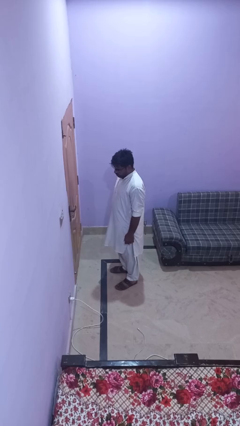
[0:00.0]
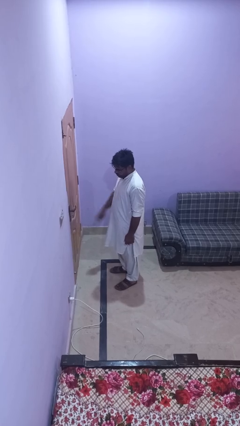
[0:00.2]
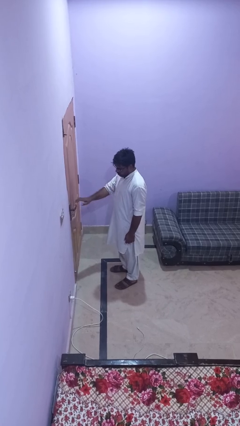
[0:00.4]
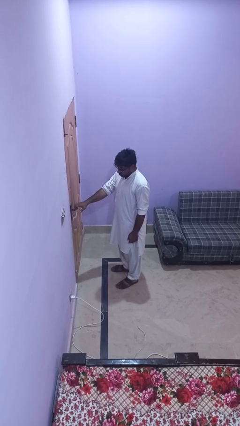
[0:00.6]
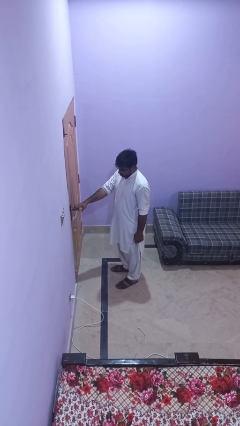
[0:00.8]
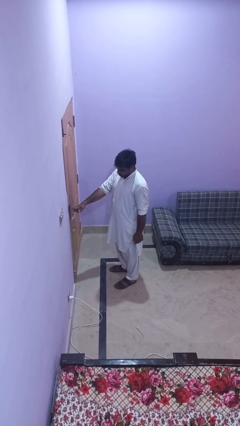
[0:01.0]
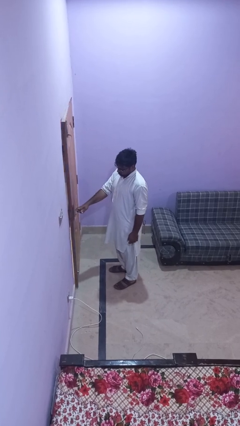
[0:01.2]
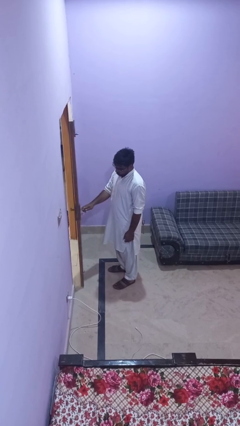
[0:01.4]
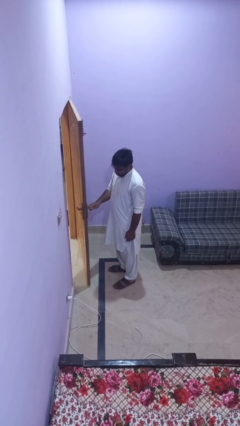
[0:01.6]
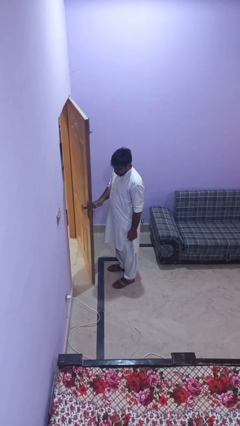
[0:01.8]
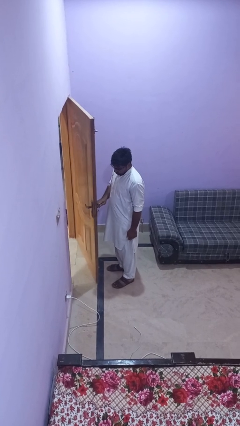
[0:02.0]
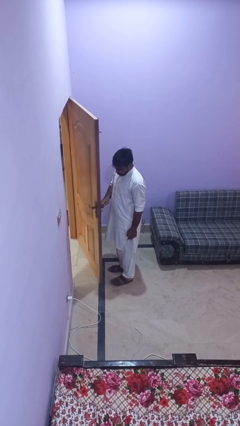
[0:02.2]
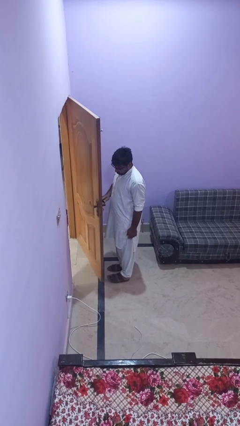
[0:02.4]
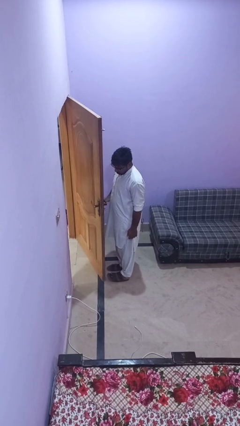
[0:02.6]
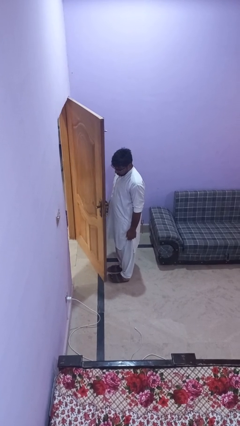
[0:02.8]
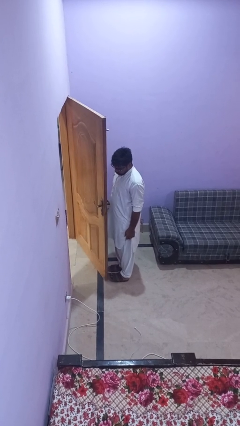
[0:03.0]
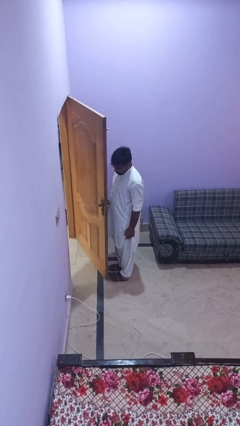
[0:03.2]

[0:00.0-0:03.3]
person opens facility door

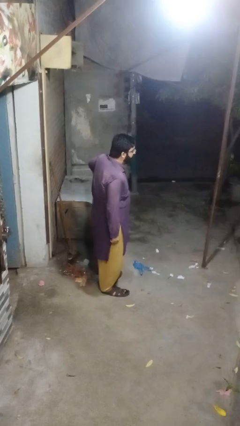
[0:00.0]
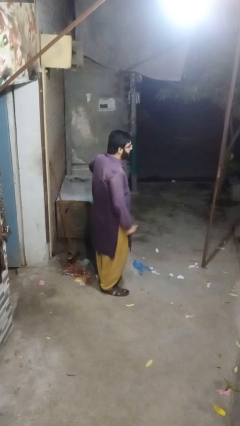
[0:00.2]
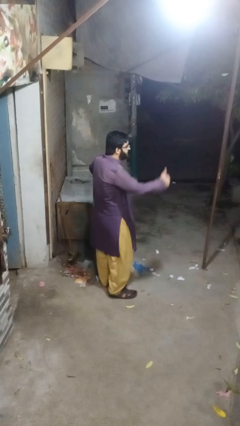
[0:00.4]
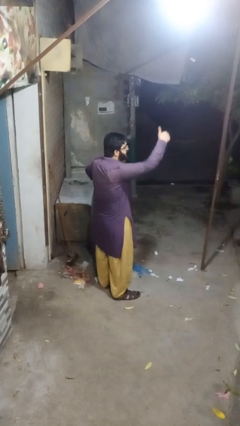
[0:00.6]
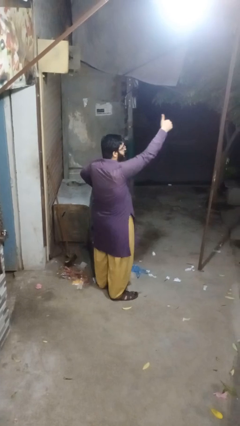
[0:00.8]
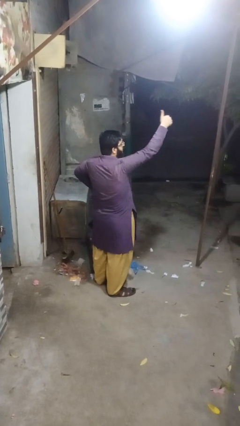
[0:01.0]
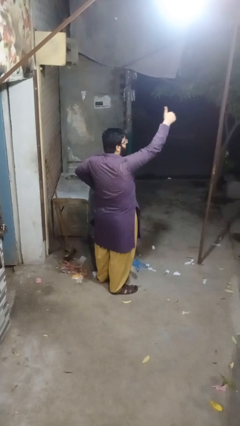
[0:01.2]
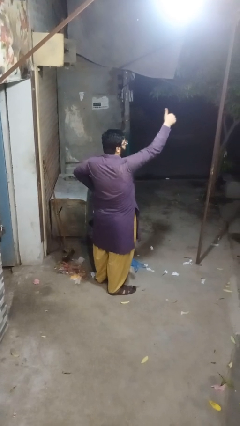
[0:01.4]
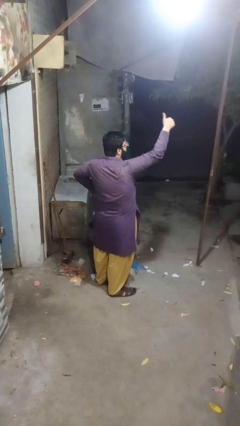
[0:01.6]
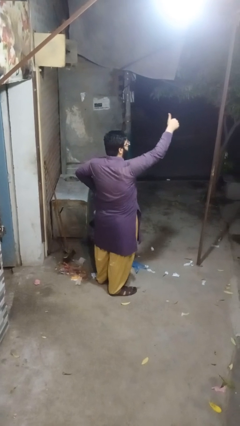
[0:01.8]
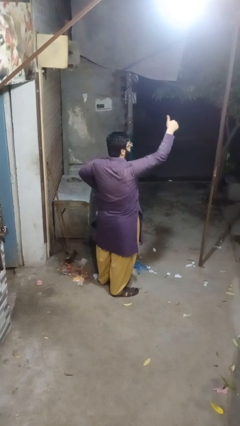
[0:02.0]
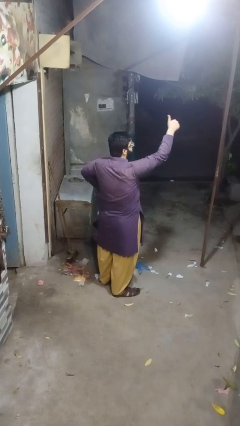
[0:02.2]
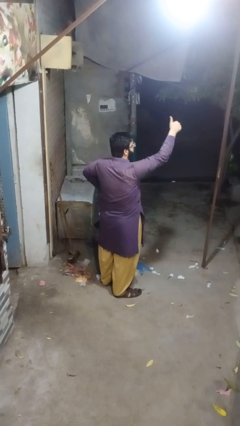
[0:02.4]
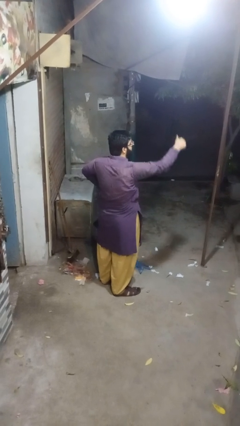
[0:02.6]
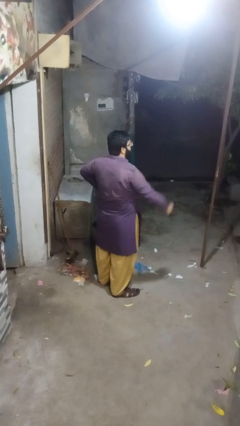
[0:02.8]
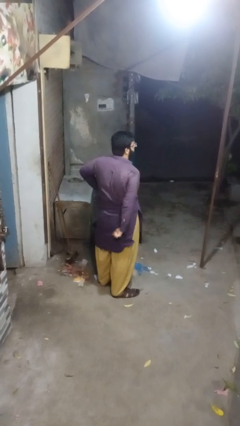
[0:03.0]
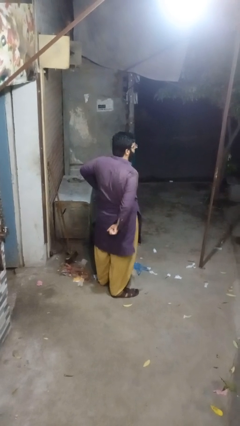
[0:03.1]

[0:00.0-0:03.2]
person gestures thumbs up

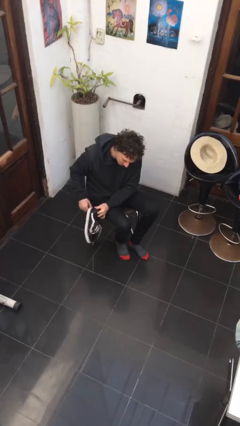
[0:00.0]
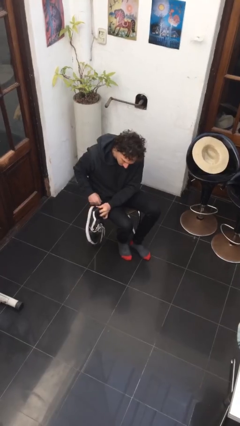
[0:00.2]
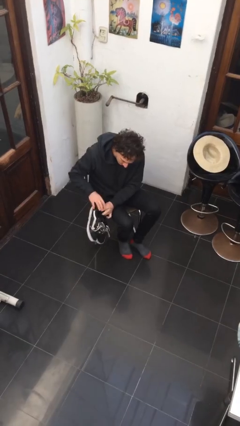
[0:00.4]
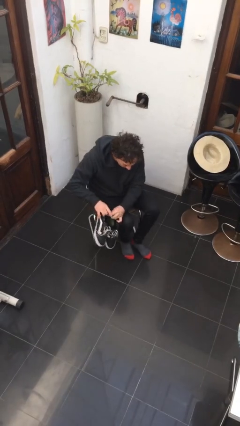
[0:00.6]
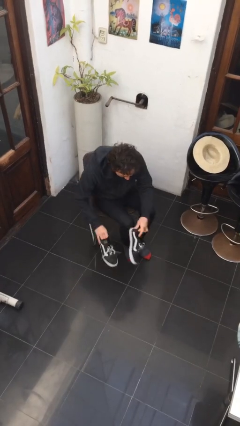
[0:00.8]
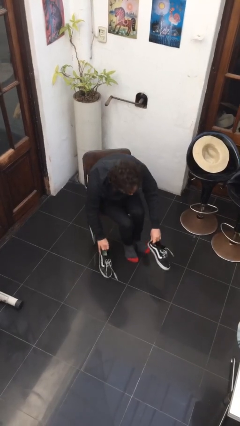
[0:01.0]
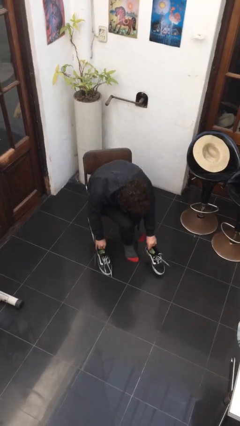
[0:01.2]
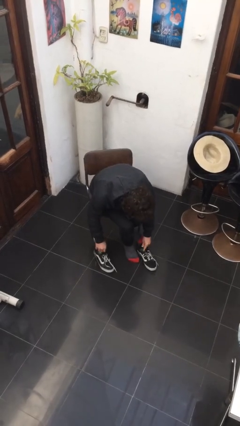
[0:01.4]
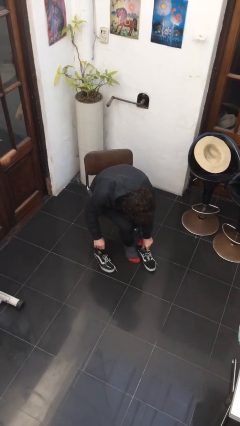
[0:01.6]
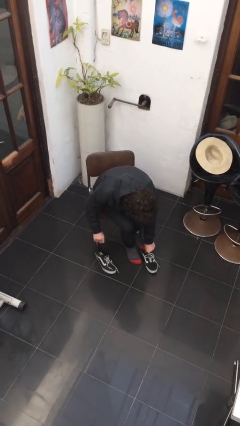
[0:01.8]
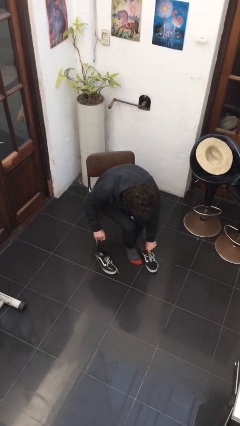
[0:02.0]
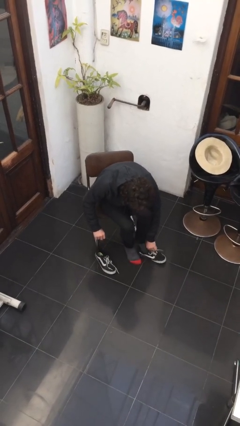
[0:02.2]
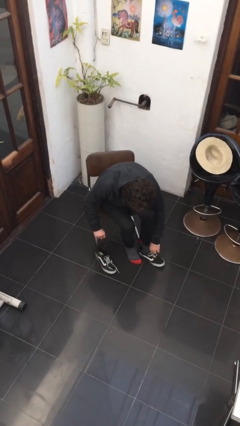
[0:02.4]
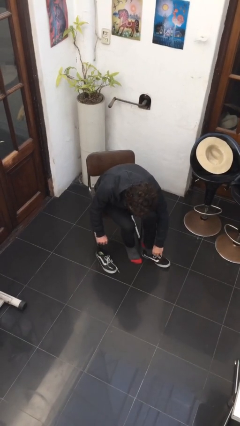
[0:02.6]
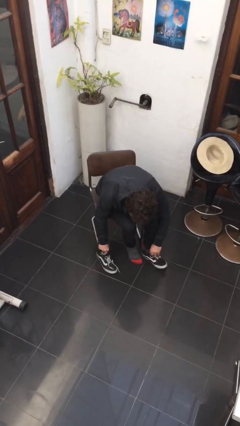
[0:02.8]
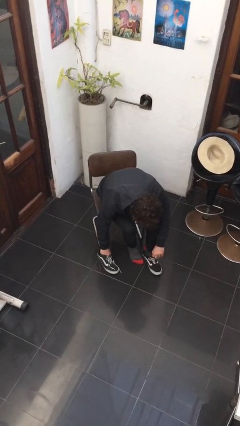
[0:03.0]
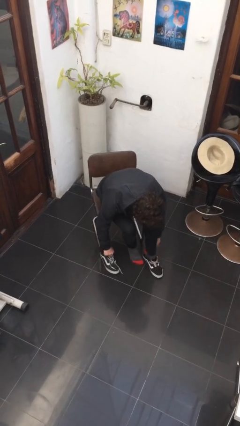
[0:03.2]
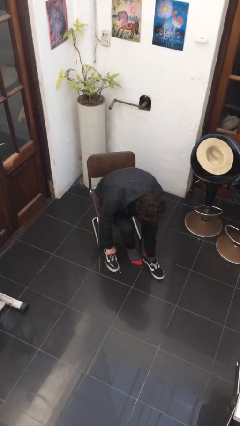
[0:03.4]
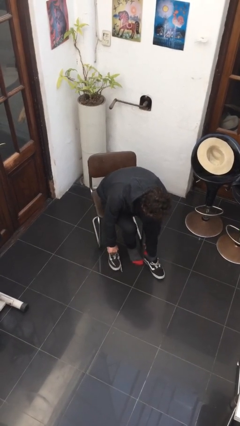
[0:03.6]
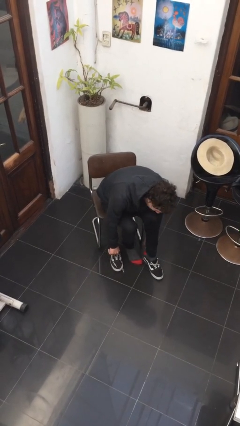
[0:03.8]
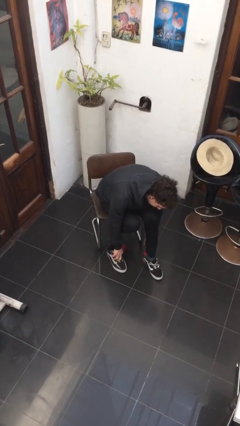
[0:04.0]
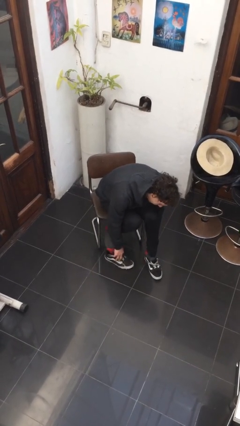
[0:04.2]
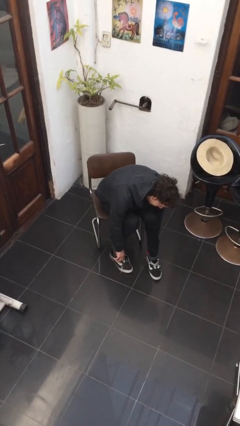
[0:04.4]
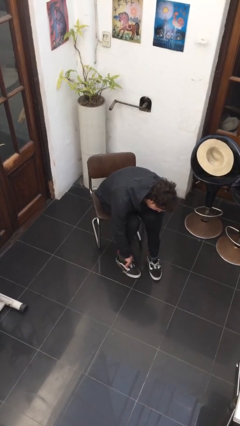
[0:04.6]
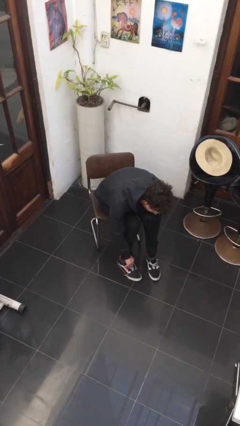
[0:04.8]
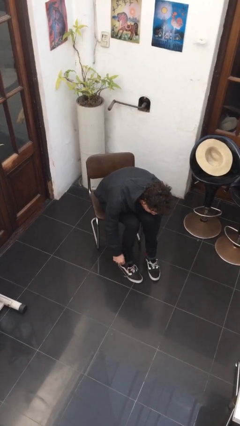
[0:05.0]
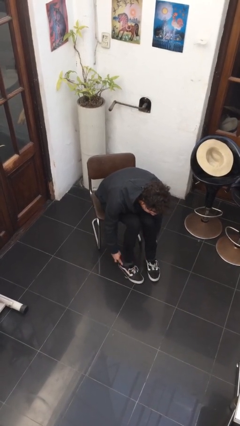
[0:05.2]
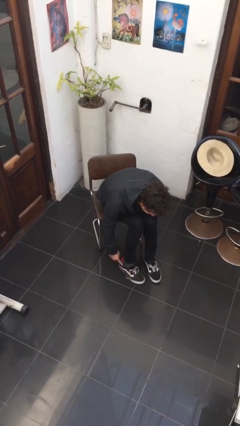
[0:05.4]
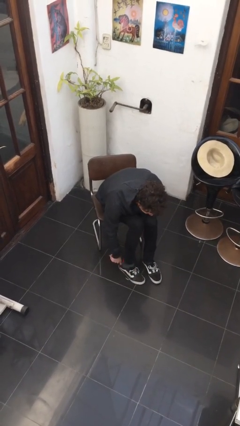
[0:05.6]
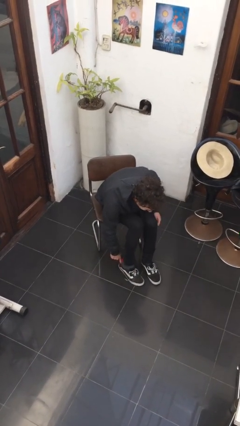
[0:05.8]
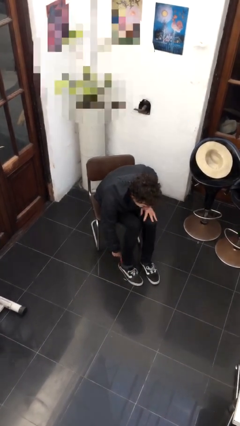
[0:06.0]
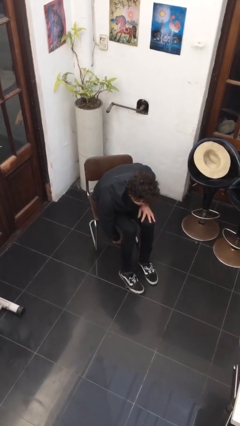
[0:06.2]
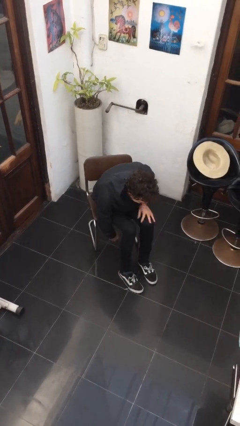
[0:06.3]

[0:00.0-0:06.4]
person puts on shoes

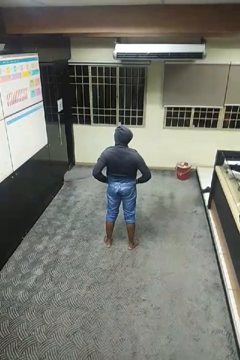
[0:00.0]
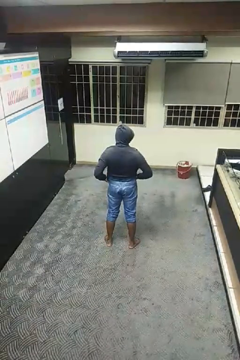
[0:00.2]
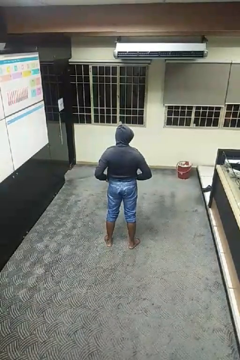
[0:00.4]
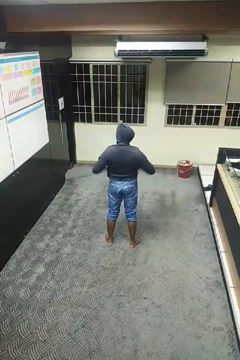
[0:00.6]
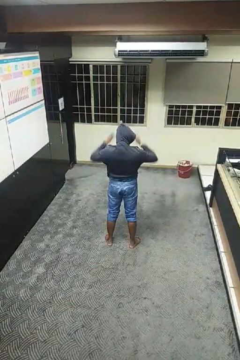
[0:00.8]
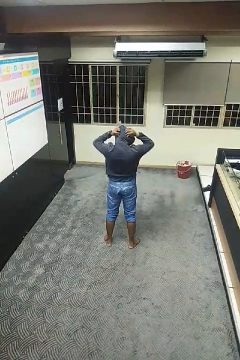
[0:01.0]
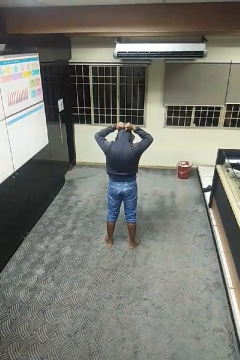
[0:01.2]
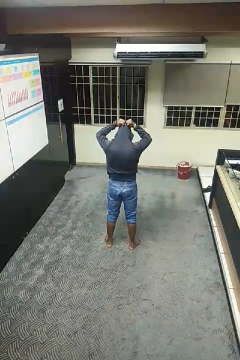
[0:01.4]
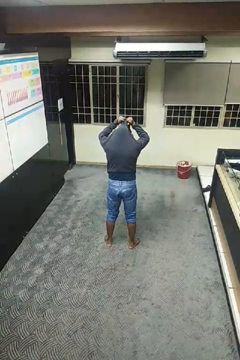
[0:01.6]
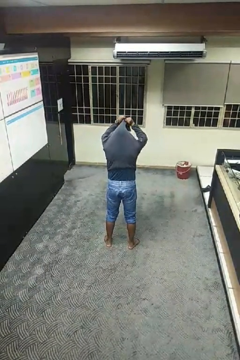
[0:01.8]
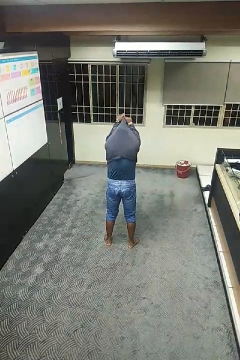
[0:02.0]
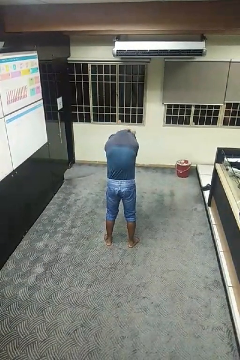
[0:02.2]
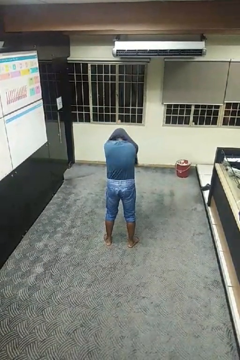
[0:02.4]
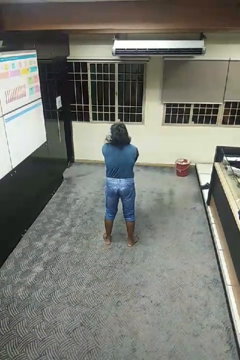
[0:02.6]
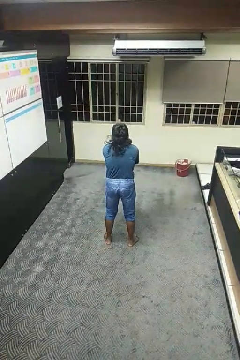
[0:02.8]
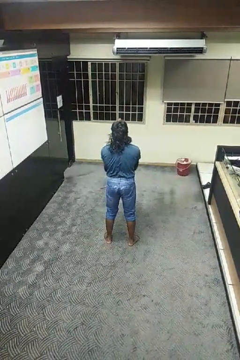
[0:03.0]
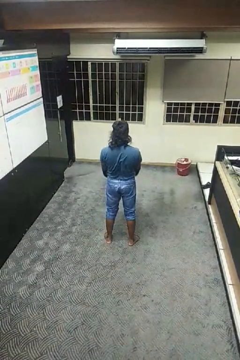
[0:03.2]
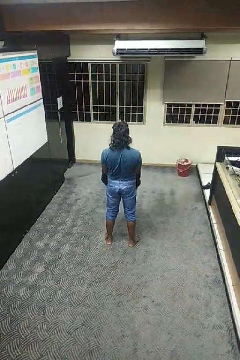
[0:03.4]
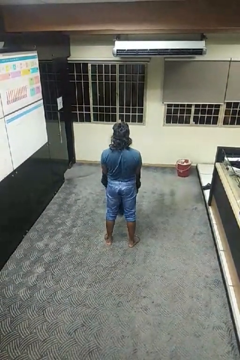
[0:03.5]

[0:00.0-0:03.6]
person takes off hoodie

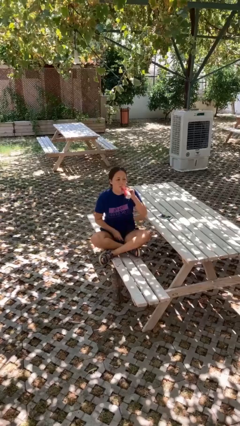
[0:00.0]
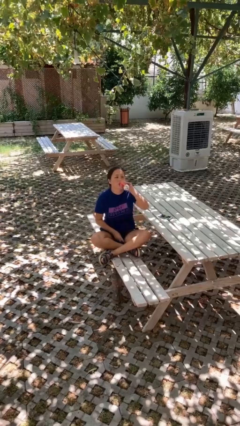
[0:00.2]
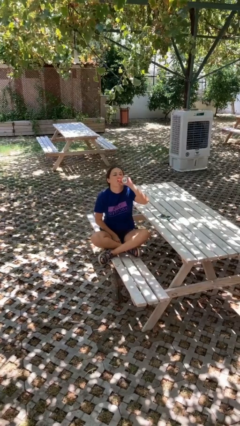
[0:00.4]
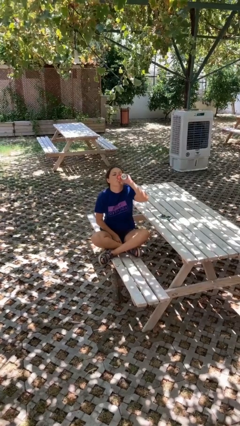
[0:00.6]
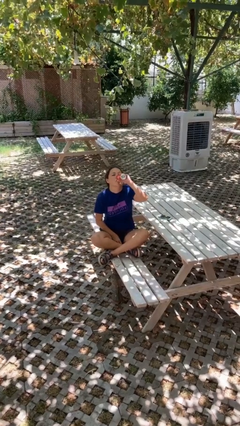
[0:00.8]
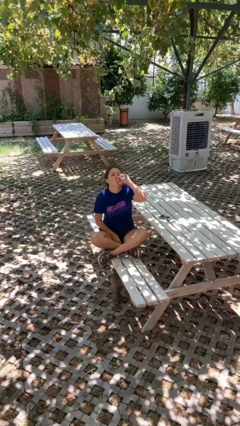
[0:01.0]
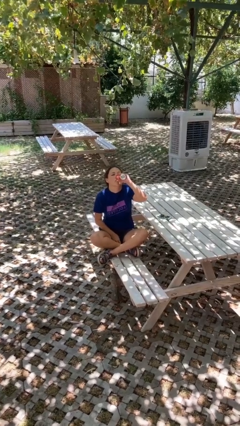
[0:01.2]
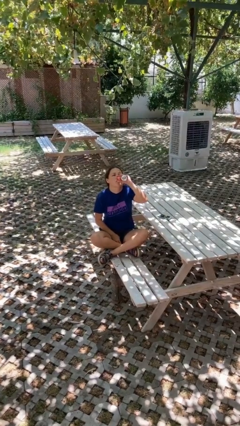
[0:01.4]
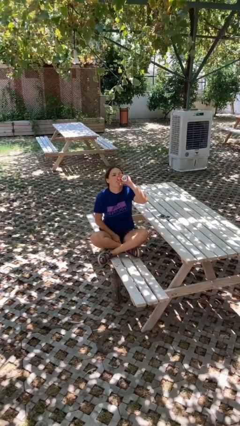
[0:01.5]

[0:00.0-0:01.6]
person drinks from beverage can
